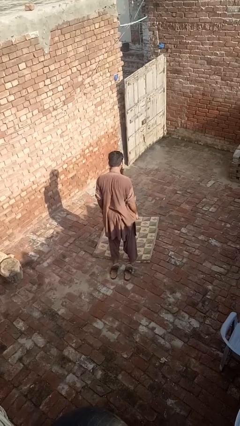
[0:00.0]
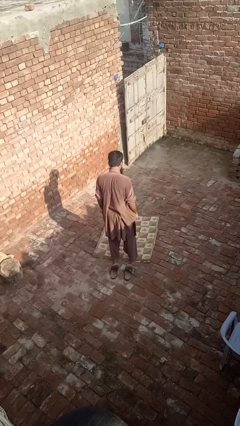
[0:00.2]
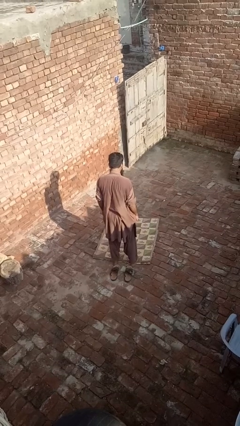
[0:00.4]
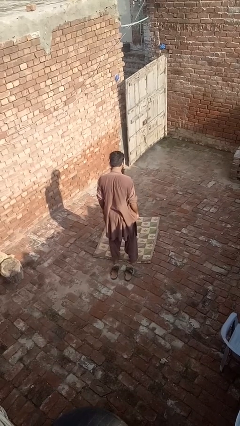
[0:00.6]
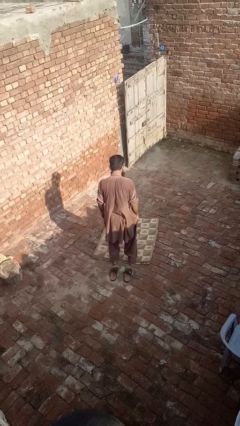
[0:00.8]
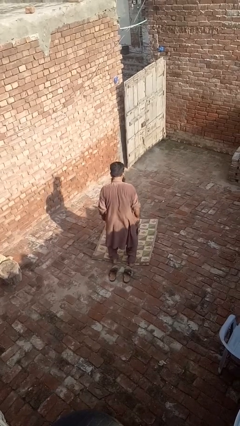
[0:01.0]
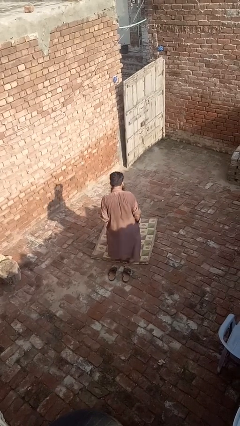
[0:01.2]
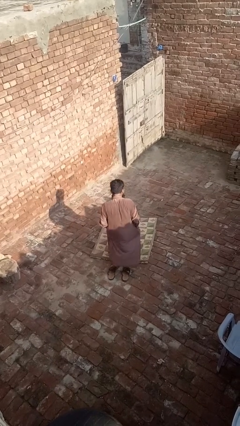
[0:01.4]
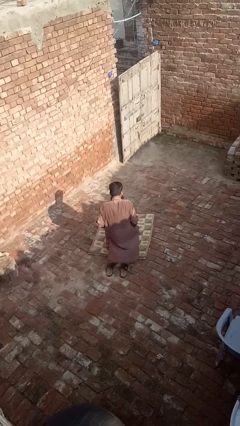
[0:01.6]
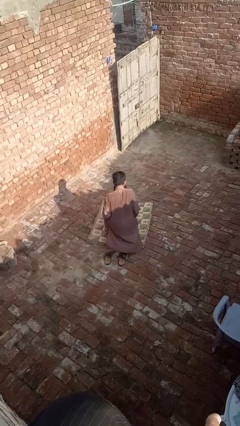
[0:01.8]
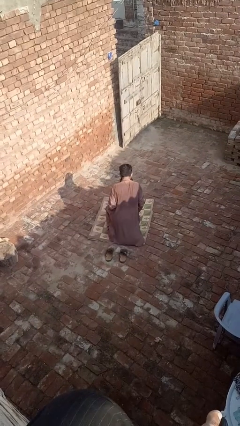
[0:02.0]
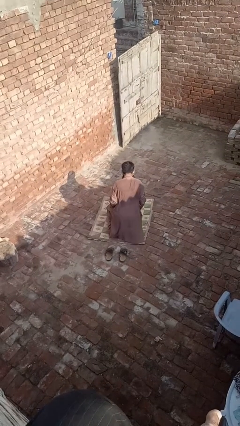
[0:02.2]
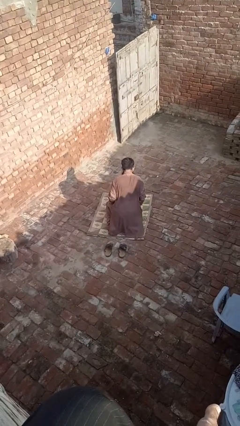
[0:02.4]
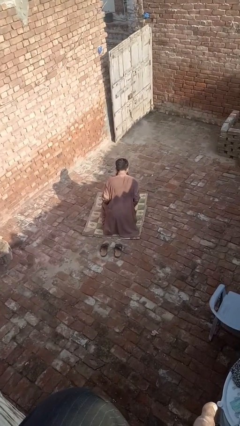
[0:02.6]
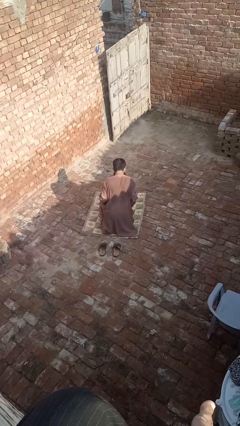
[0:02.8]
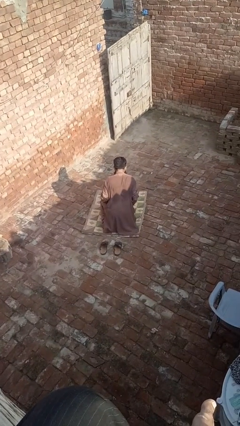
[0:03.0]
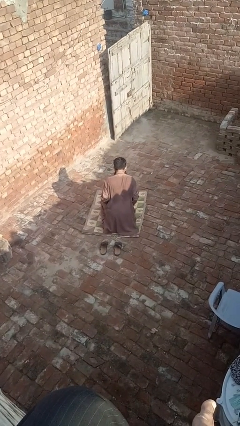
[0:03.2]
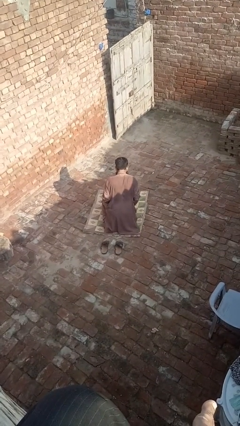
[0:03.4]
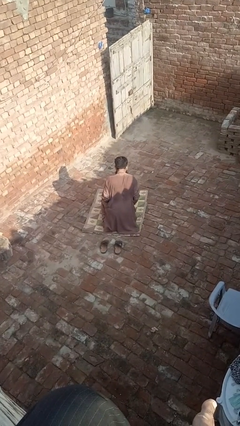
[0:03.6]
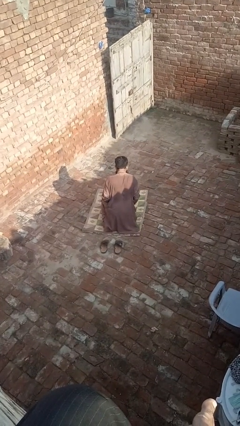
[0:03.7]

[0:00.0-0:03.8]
person kneels

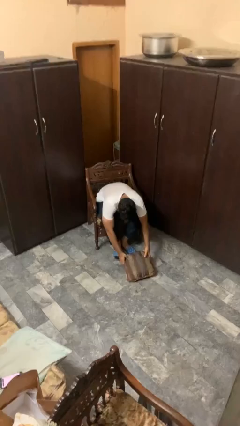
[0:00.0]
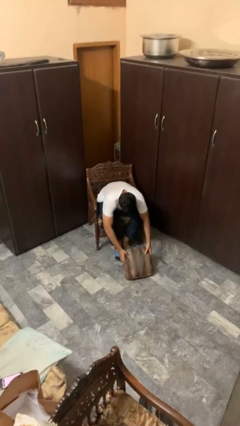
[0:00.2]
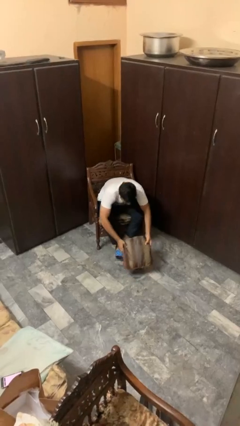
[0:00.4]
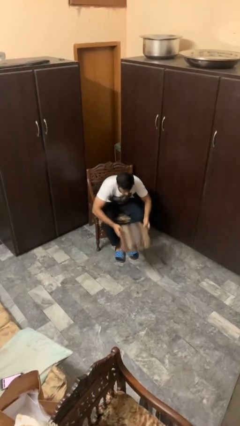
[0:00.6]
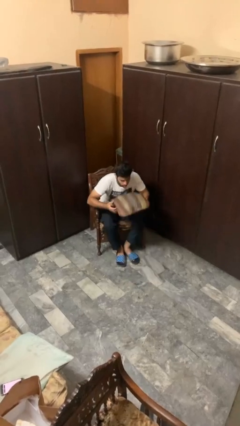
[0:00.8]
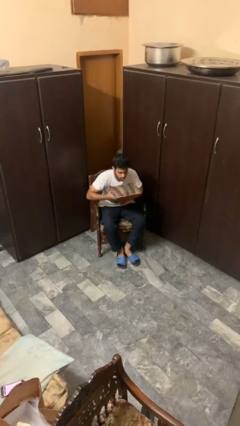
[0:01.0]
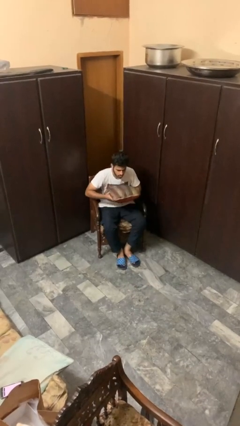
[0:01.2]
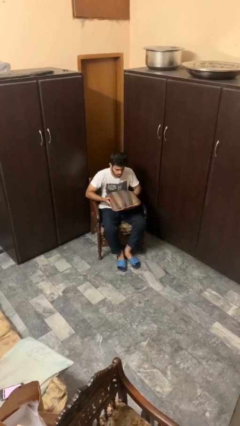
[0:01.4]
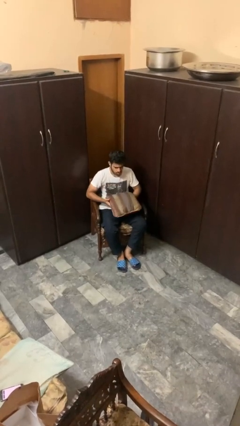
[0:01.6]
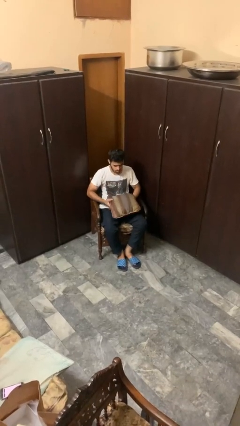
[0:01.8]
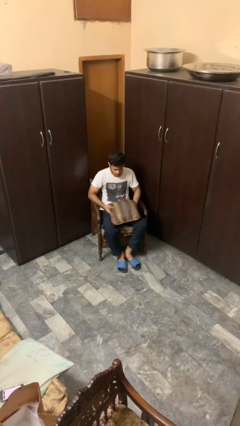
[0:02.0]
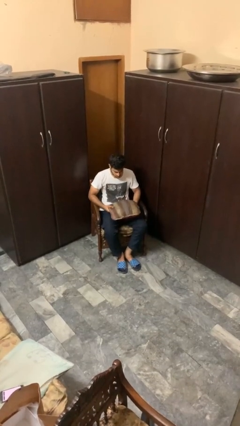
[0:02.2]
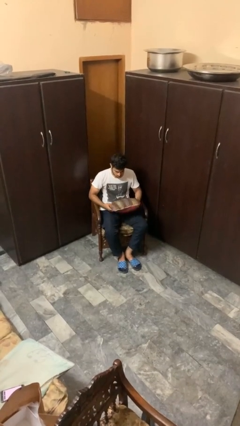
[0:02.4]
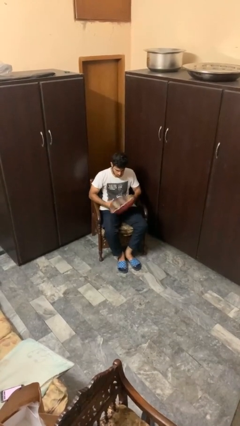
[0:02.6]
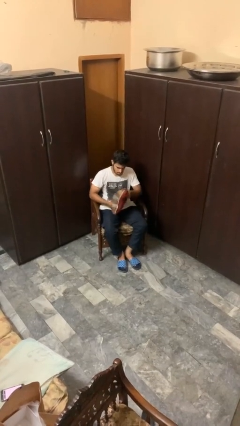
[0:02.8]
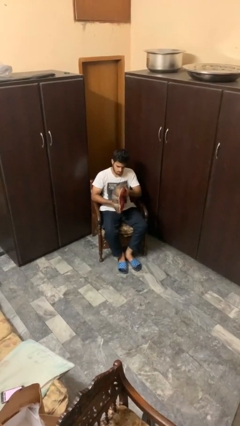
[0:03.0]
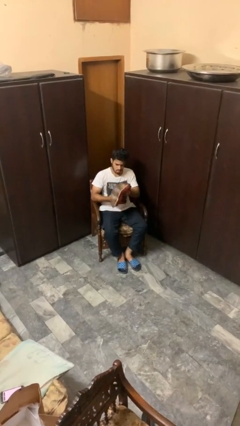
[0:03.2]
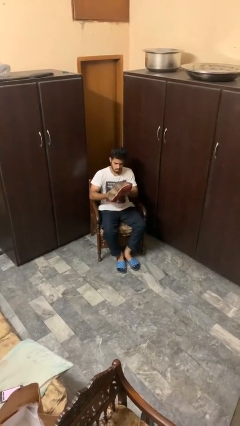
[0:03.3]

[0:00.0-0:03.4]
person picks up object from floor

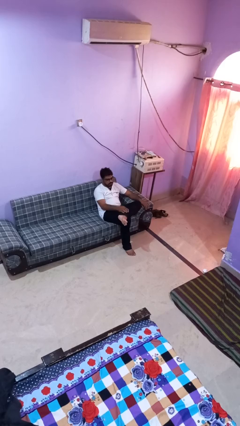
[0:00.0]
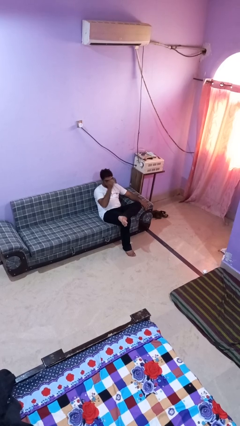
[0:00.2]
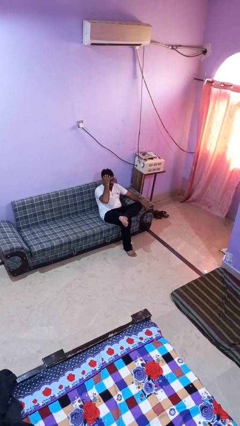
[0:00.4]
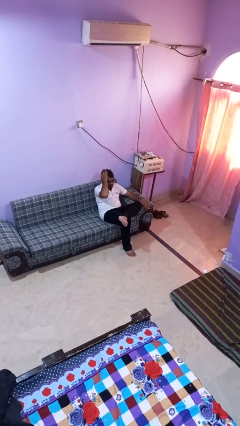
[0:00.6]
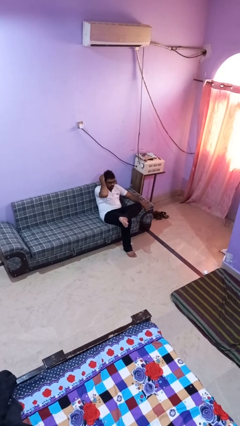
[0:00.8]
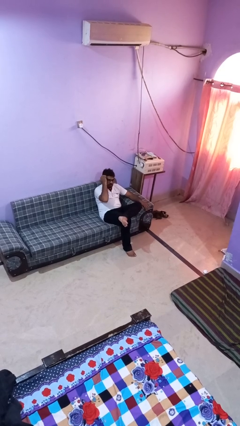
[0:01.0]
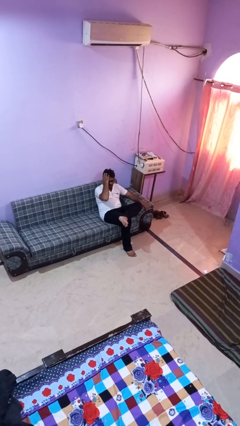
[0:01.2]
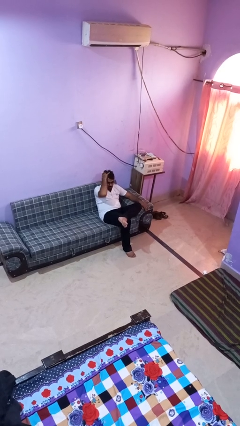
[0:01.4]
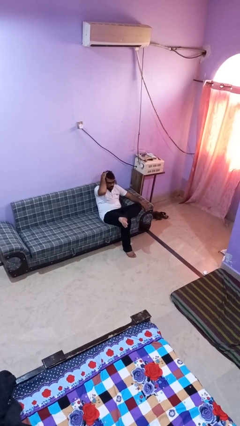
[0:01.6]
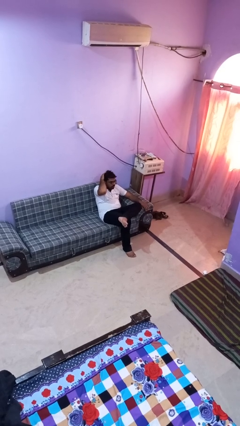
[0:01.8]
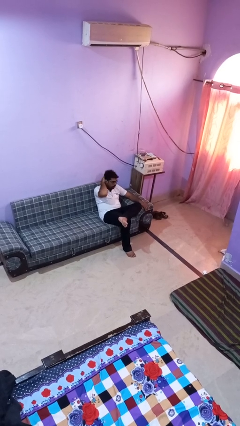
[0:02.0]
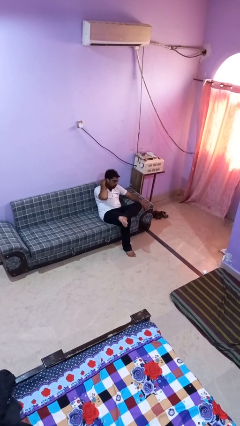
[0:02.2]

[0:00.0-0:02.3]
person strokes hair

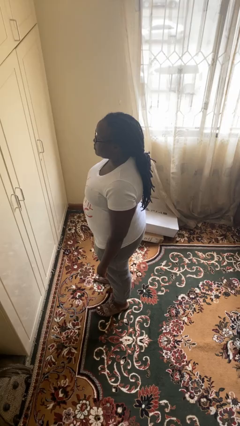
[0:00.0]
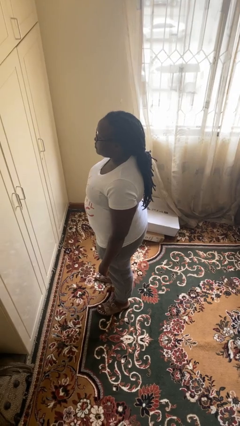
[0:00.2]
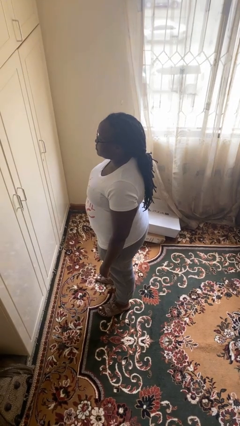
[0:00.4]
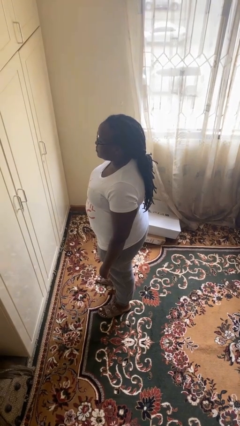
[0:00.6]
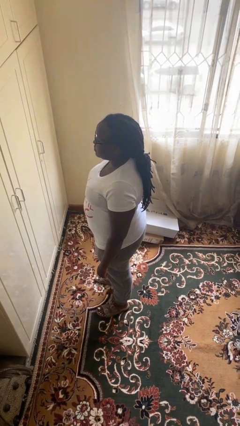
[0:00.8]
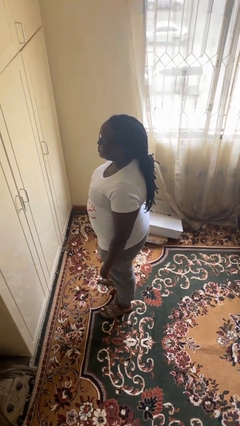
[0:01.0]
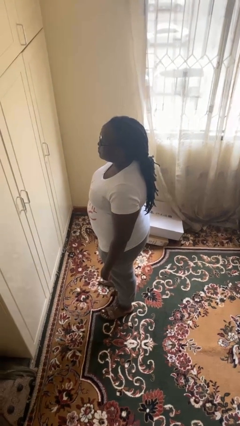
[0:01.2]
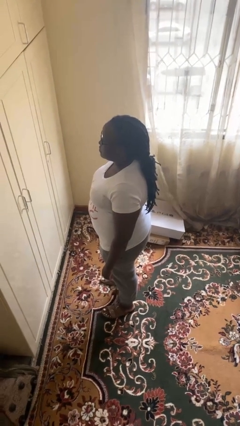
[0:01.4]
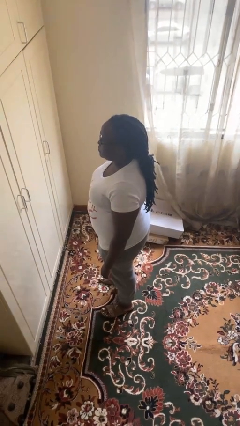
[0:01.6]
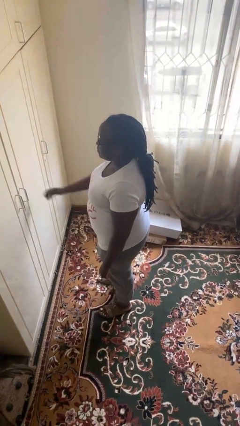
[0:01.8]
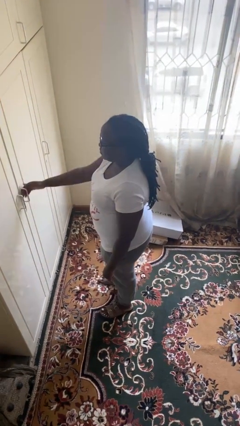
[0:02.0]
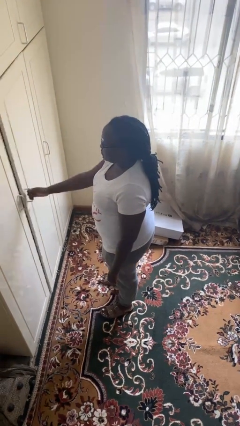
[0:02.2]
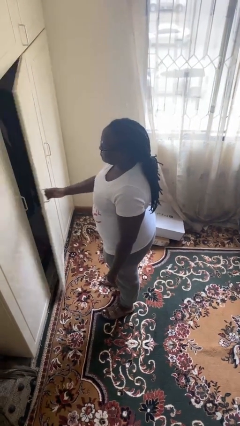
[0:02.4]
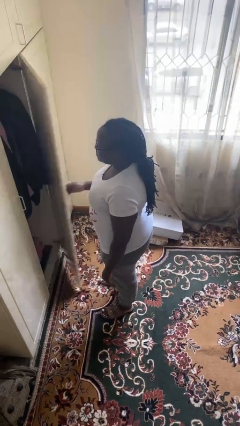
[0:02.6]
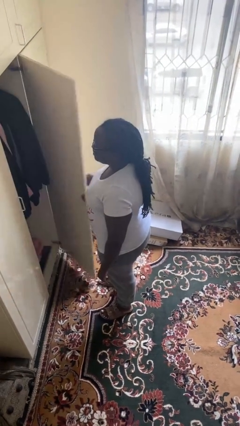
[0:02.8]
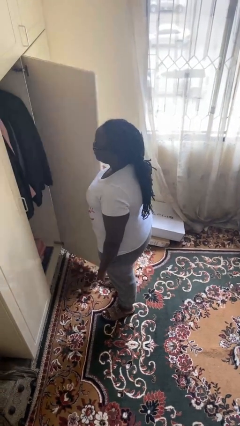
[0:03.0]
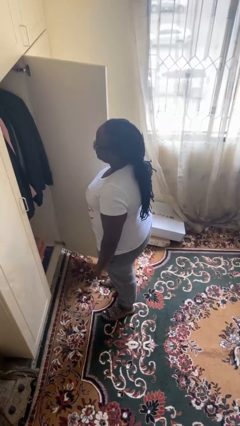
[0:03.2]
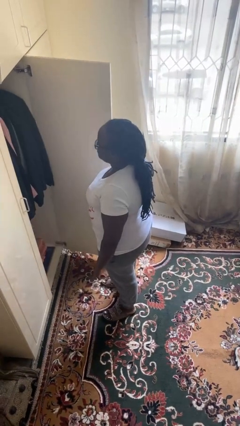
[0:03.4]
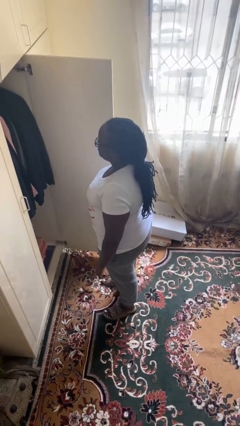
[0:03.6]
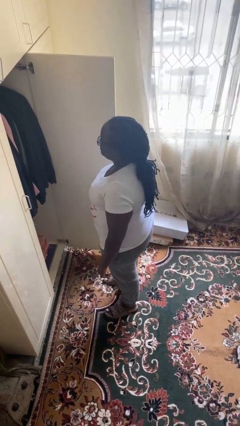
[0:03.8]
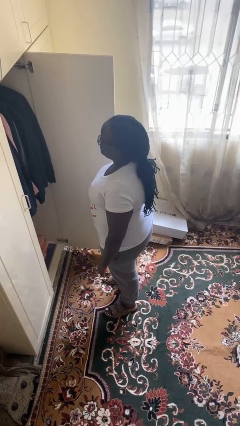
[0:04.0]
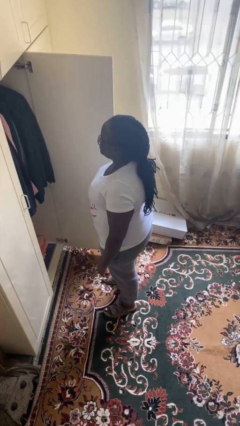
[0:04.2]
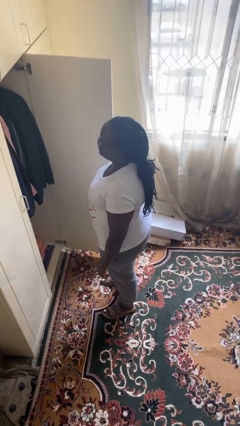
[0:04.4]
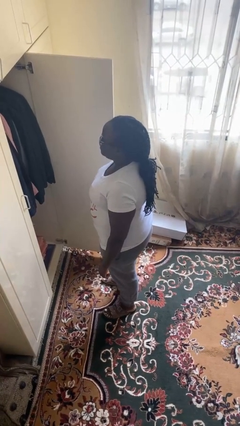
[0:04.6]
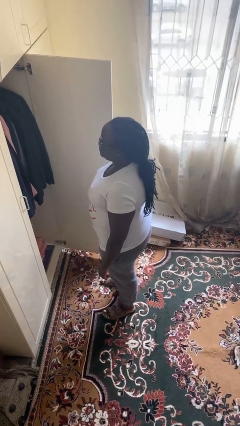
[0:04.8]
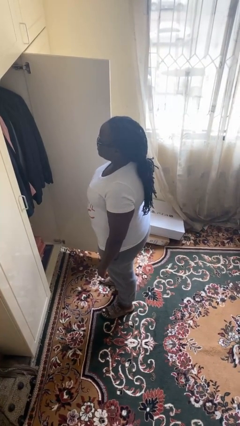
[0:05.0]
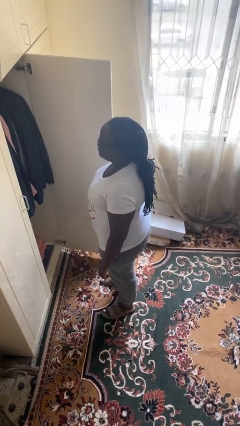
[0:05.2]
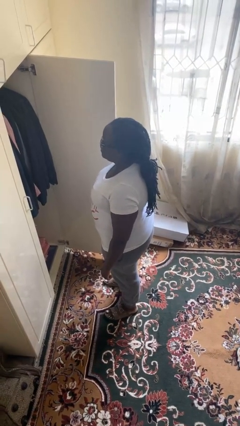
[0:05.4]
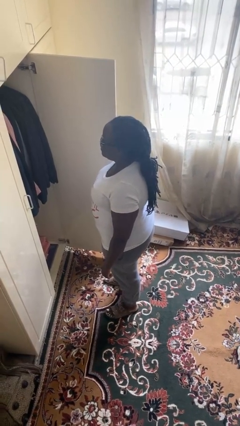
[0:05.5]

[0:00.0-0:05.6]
person opens closet door

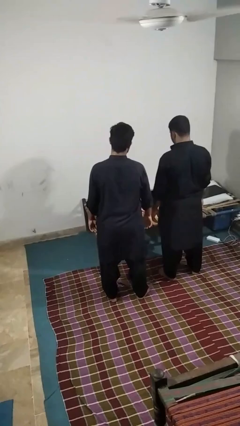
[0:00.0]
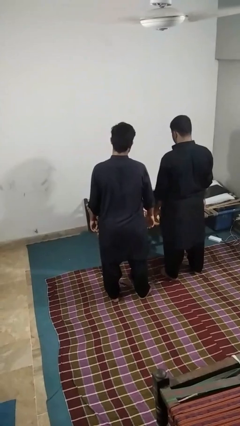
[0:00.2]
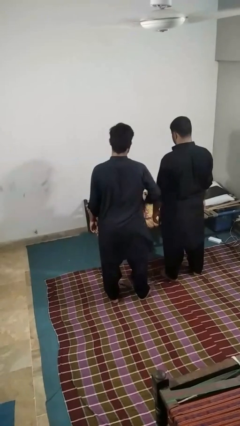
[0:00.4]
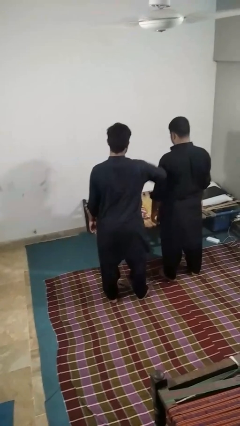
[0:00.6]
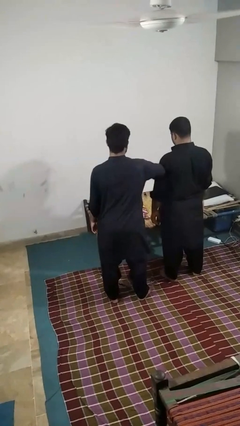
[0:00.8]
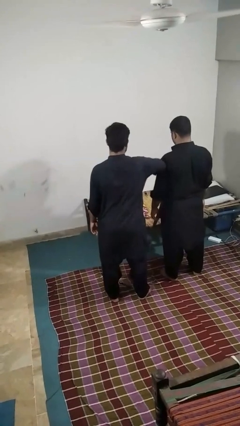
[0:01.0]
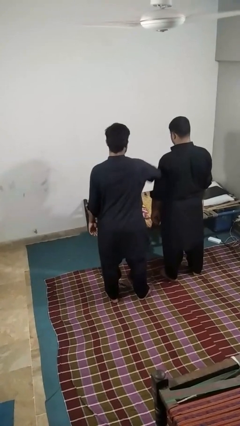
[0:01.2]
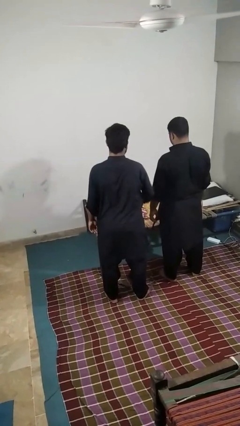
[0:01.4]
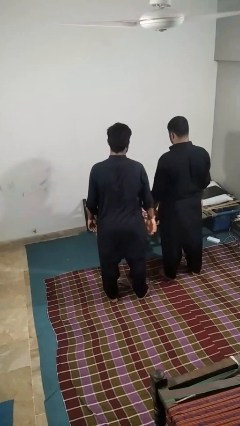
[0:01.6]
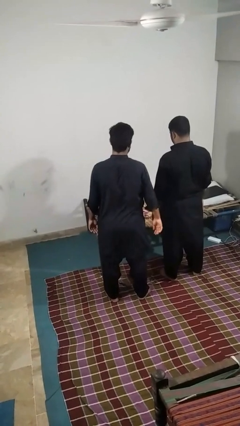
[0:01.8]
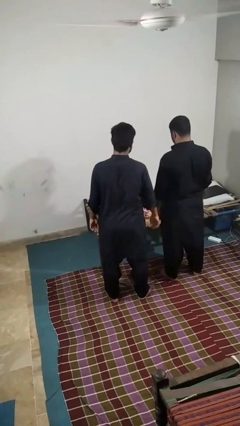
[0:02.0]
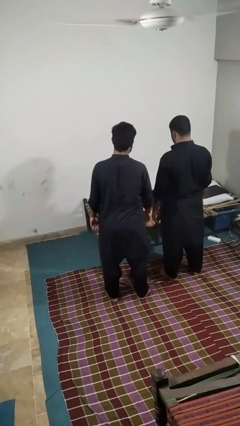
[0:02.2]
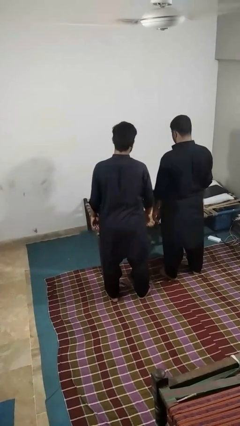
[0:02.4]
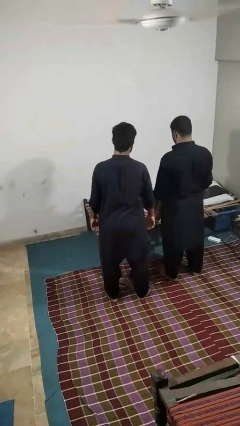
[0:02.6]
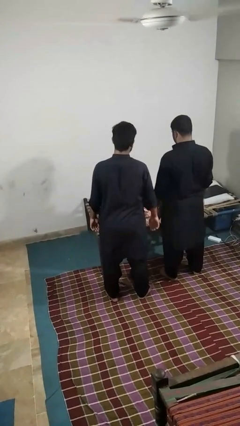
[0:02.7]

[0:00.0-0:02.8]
person nudges person with elbow
